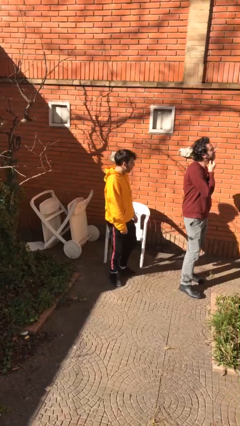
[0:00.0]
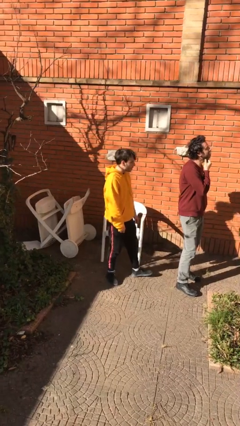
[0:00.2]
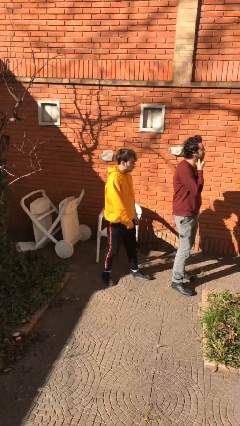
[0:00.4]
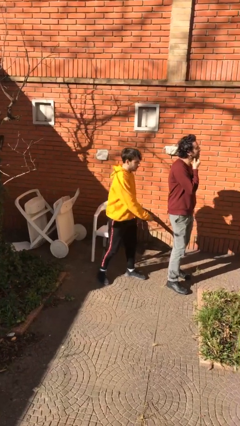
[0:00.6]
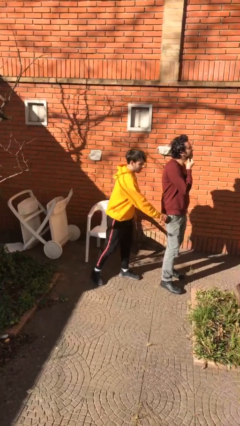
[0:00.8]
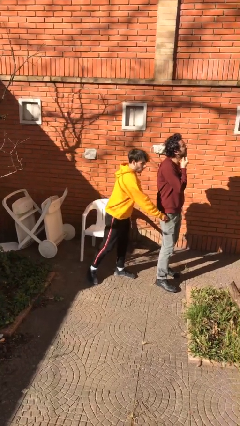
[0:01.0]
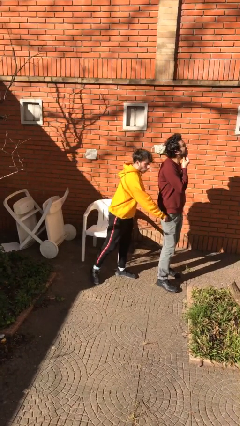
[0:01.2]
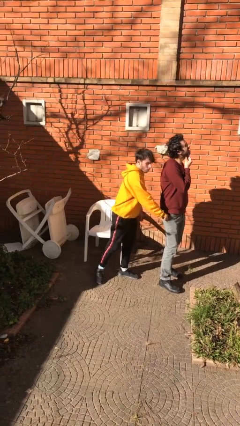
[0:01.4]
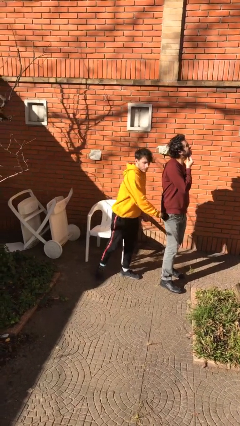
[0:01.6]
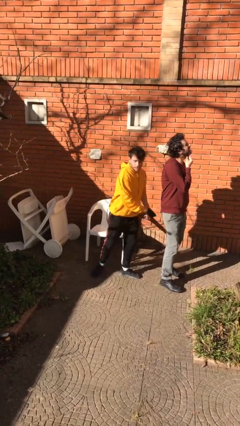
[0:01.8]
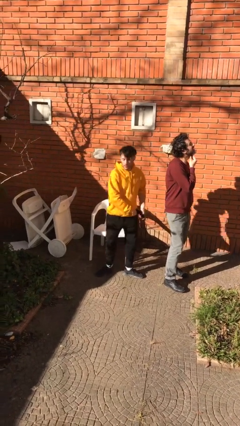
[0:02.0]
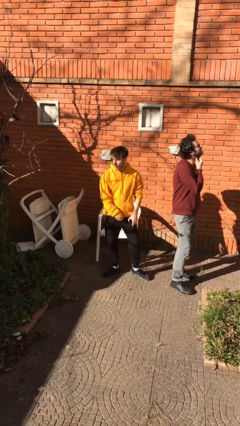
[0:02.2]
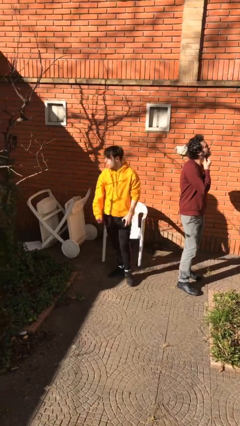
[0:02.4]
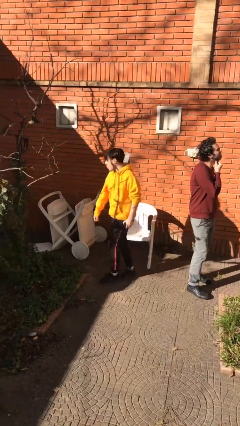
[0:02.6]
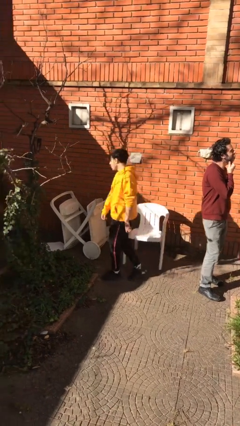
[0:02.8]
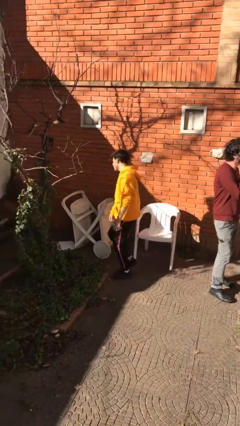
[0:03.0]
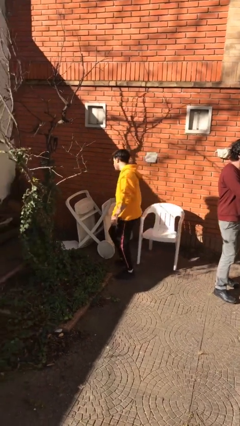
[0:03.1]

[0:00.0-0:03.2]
person steals object from person

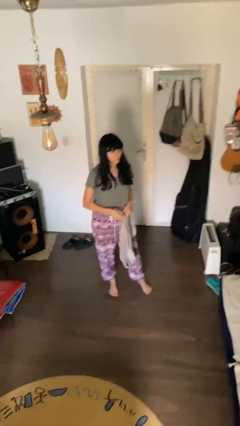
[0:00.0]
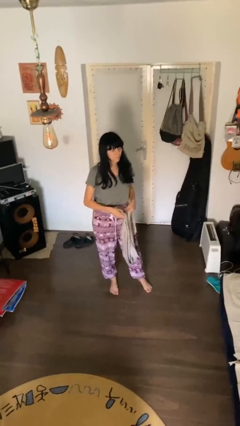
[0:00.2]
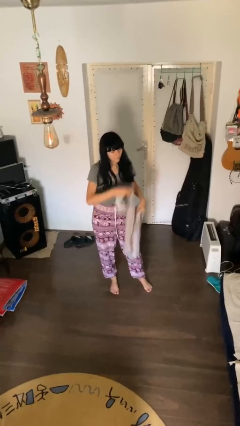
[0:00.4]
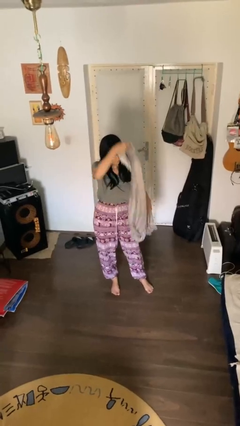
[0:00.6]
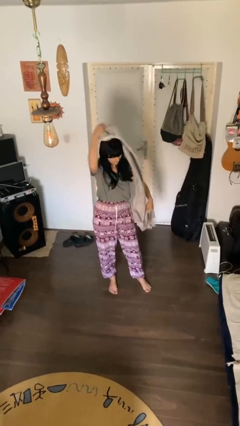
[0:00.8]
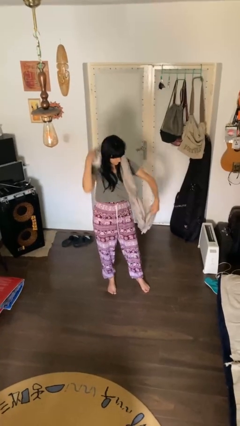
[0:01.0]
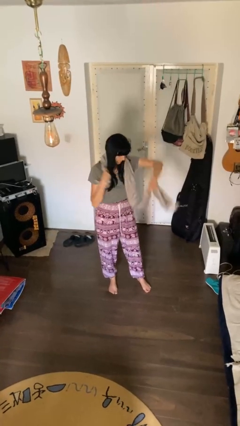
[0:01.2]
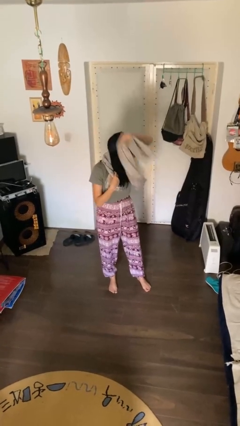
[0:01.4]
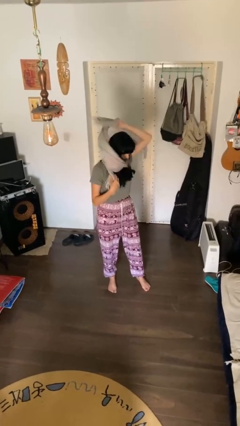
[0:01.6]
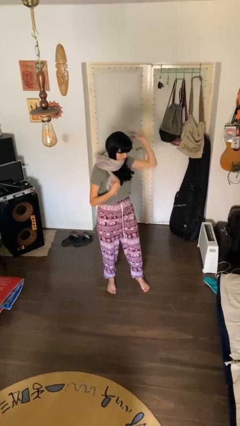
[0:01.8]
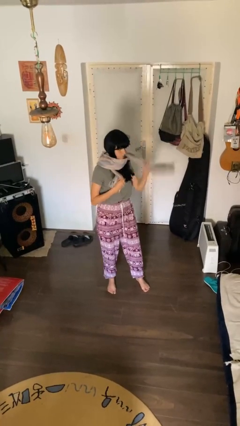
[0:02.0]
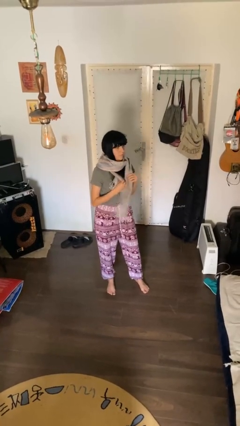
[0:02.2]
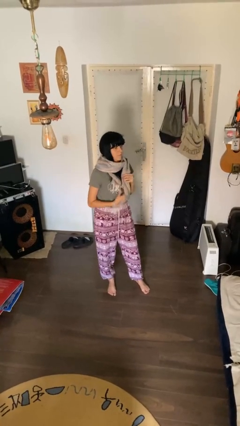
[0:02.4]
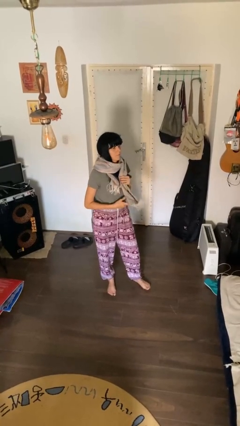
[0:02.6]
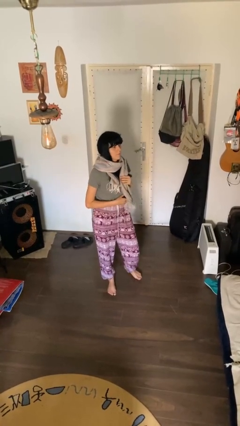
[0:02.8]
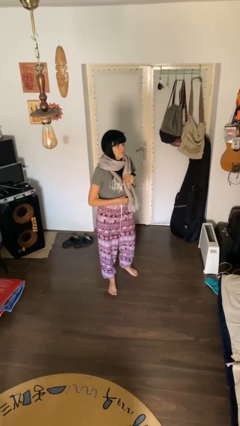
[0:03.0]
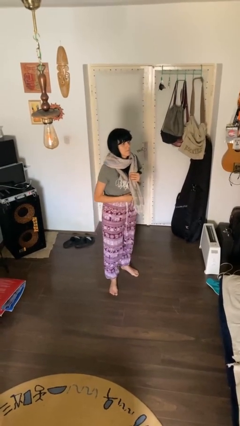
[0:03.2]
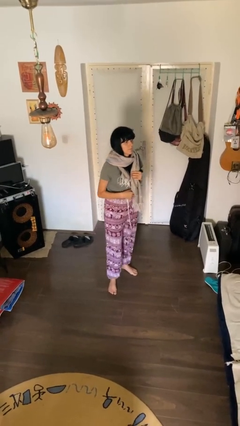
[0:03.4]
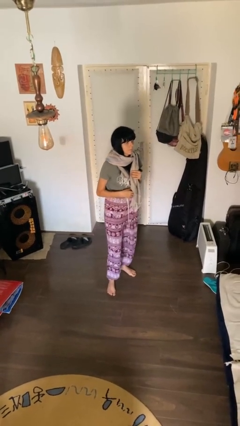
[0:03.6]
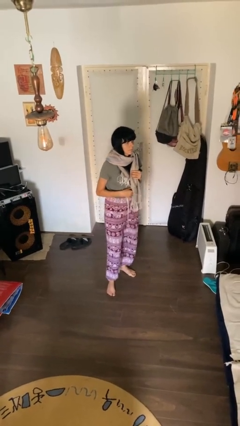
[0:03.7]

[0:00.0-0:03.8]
person puts on scarf

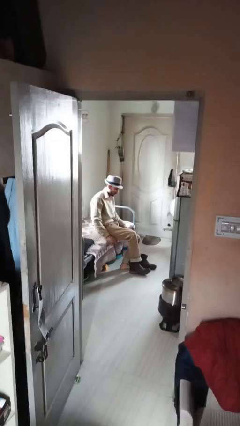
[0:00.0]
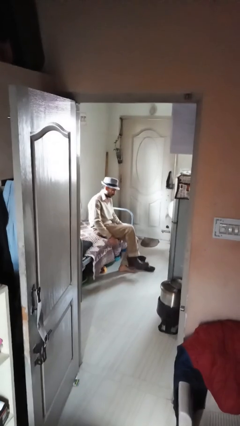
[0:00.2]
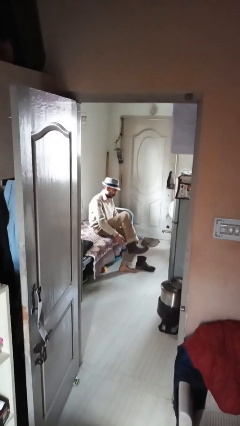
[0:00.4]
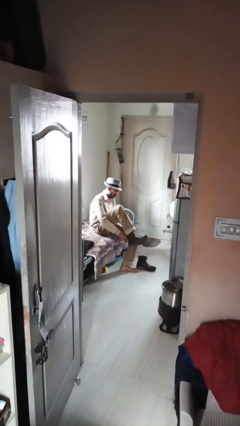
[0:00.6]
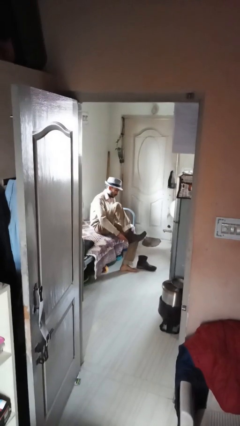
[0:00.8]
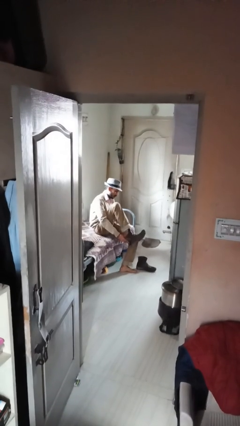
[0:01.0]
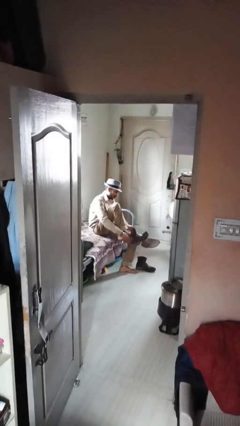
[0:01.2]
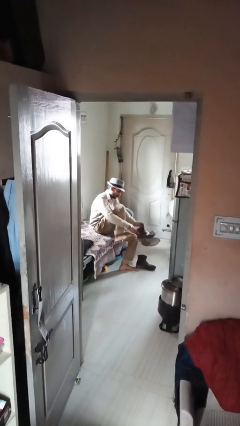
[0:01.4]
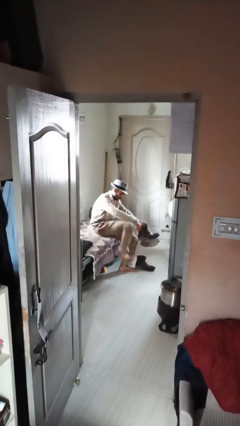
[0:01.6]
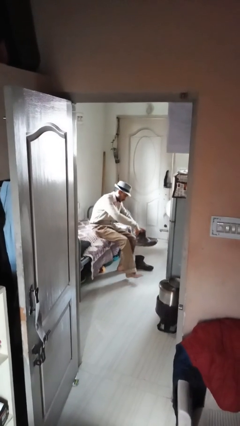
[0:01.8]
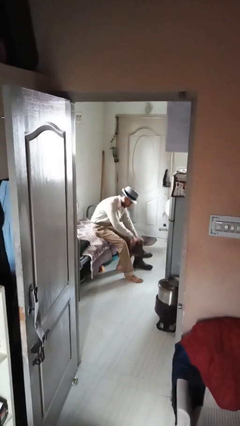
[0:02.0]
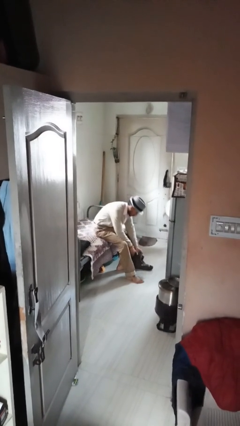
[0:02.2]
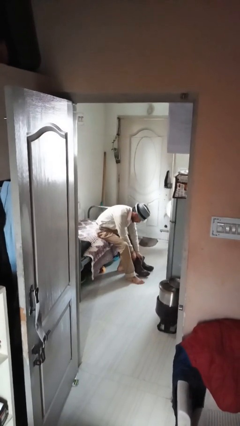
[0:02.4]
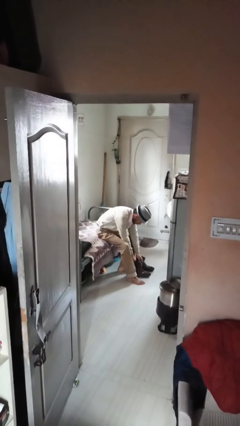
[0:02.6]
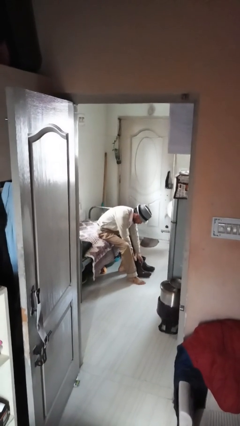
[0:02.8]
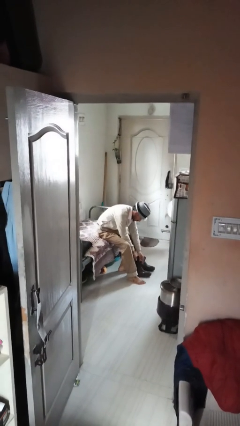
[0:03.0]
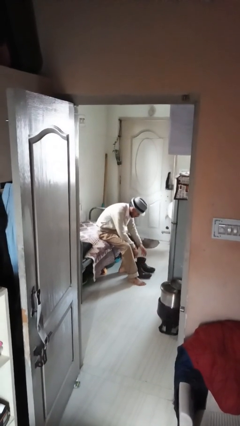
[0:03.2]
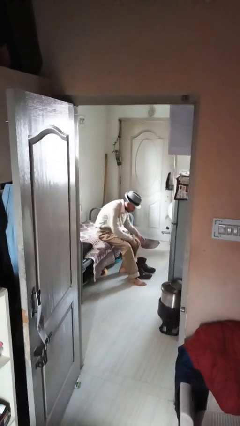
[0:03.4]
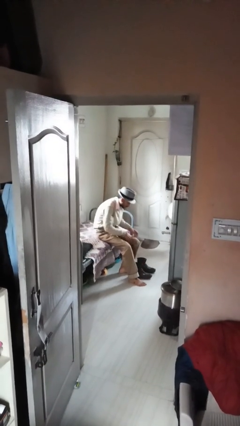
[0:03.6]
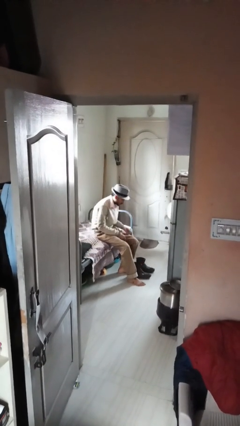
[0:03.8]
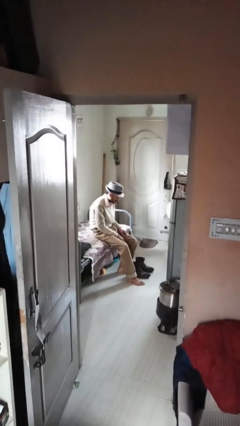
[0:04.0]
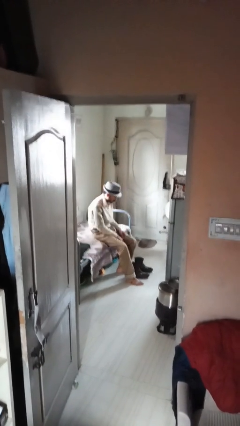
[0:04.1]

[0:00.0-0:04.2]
person takes off boots

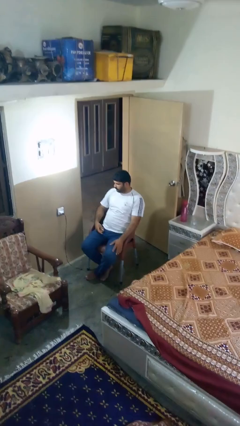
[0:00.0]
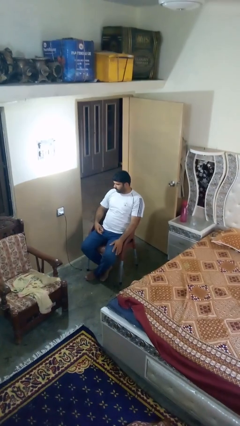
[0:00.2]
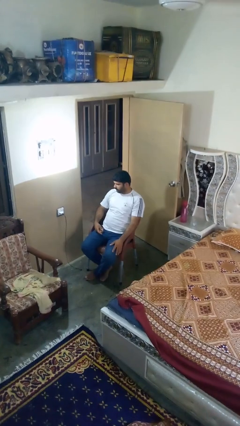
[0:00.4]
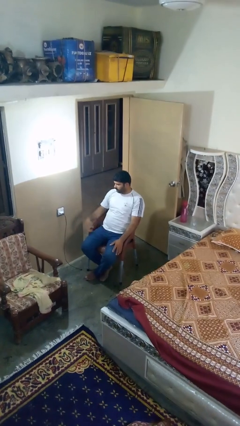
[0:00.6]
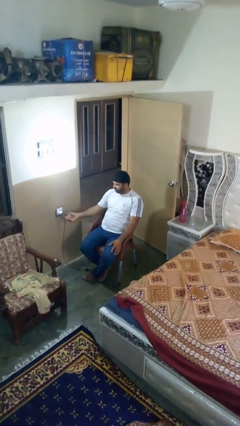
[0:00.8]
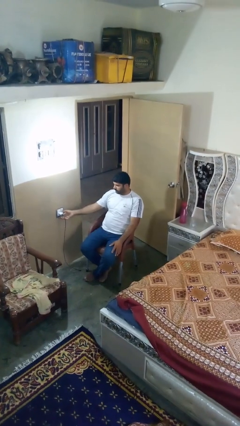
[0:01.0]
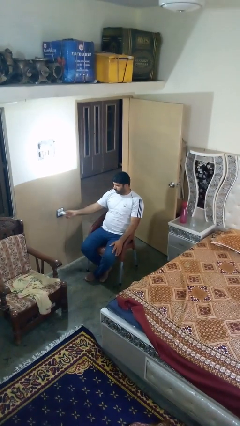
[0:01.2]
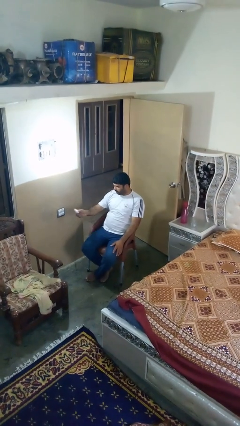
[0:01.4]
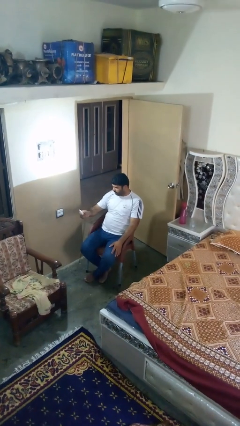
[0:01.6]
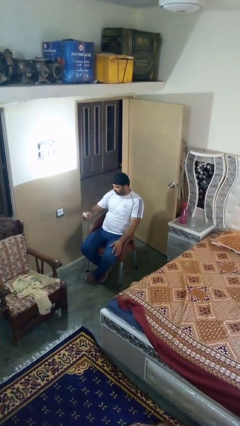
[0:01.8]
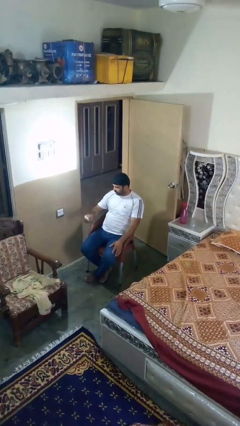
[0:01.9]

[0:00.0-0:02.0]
person unplugs from electrical socket

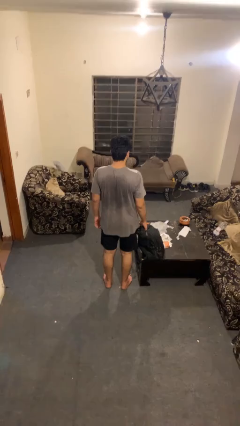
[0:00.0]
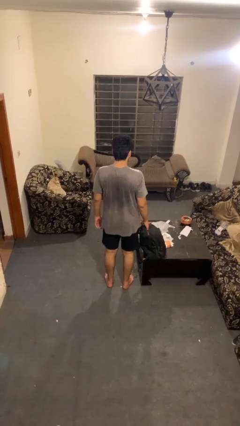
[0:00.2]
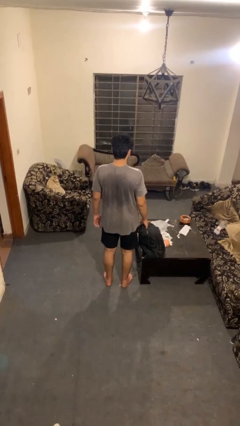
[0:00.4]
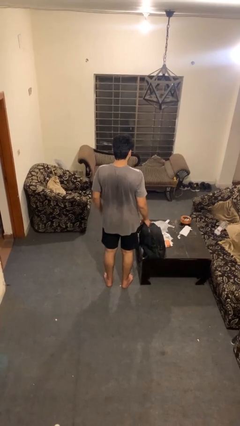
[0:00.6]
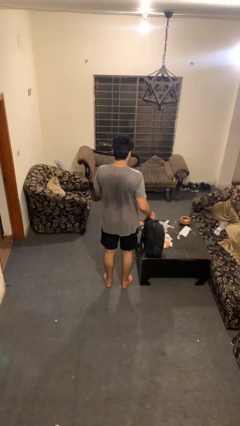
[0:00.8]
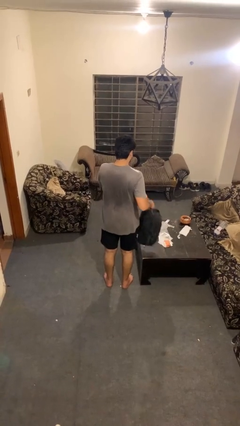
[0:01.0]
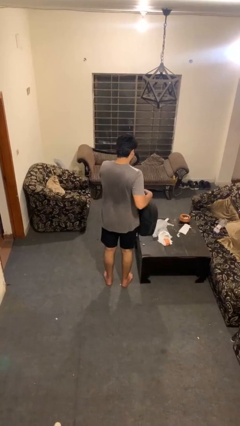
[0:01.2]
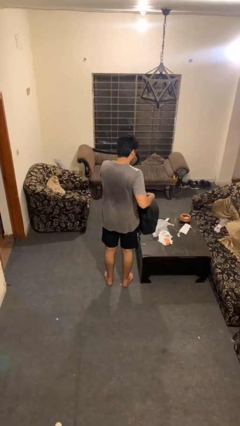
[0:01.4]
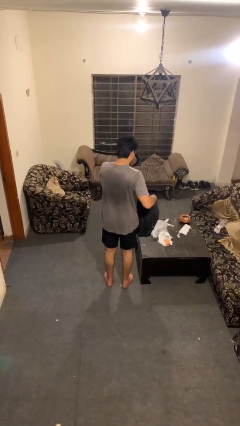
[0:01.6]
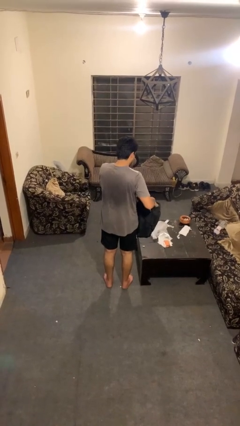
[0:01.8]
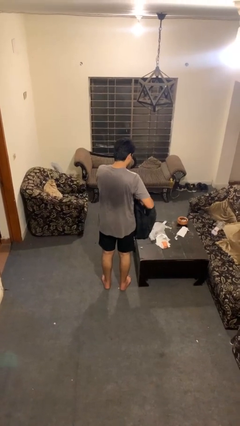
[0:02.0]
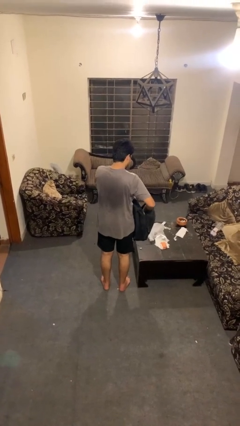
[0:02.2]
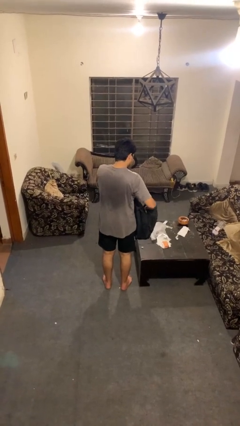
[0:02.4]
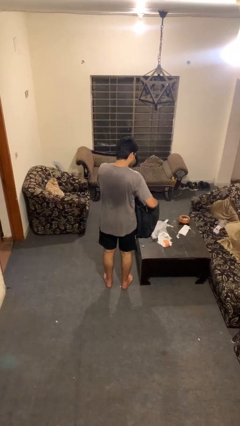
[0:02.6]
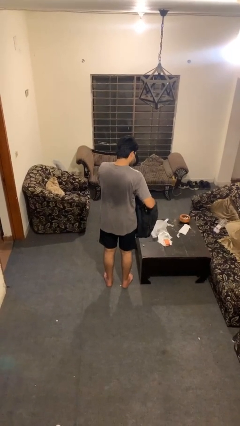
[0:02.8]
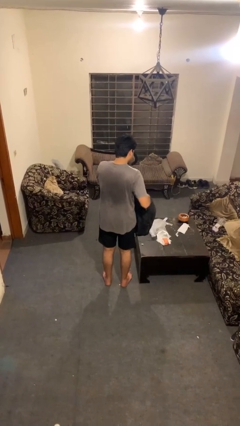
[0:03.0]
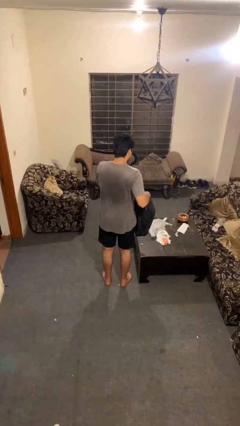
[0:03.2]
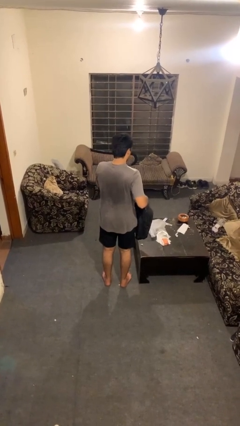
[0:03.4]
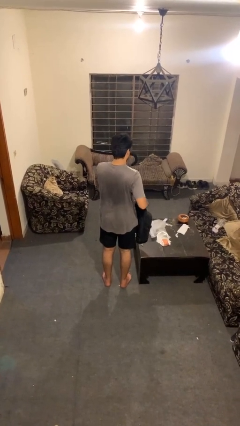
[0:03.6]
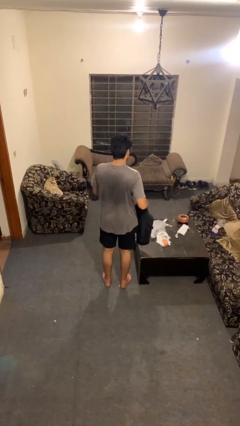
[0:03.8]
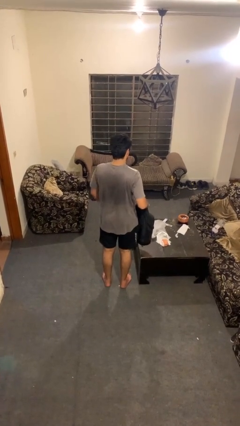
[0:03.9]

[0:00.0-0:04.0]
person searches in bag

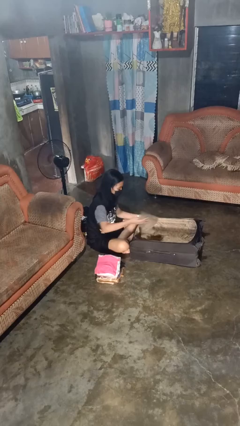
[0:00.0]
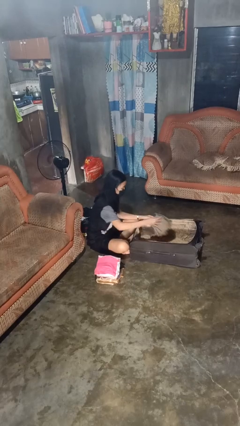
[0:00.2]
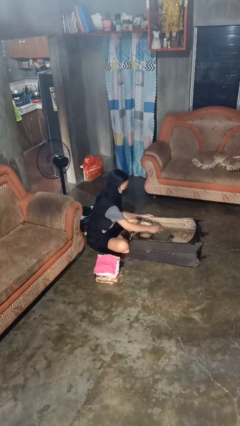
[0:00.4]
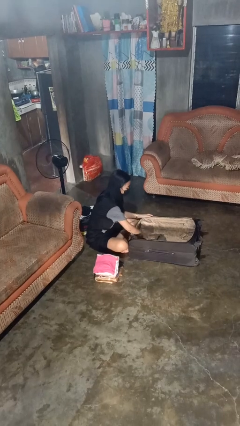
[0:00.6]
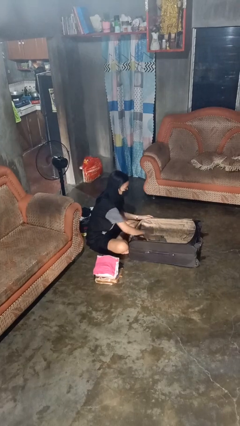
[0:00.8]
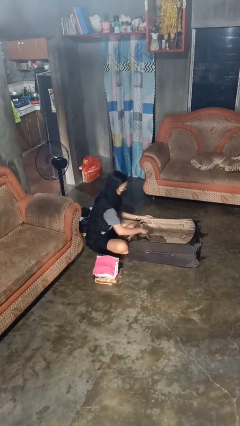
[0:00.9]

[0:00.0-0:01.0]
person loads clothes into suitcase
